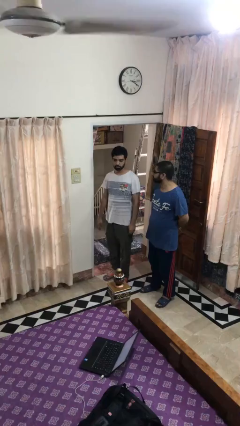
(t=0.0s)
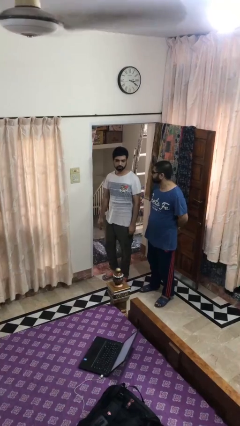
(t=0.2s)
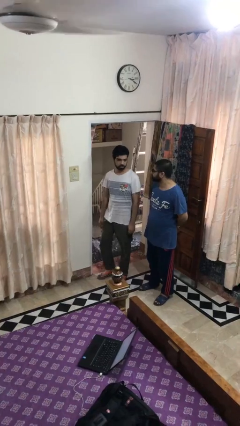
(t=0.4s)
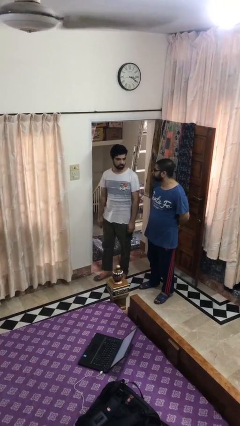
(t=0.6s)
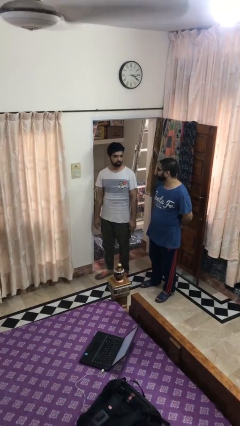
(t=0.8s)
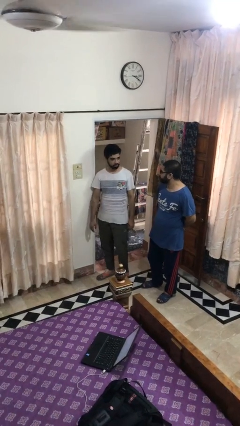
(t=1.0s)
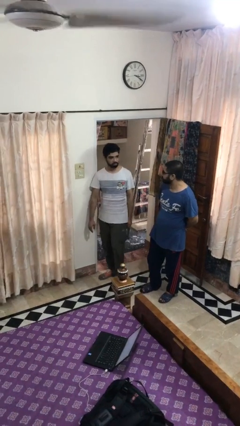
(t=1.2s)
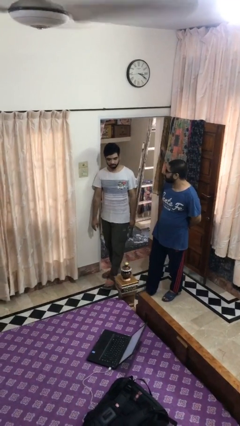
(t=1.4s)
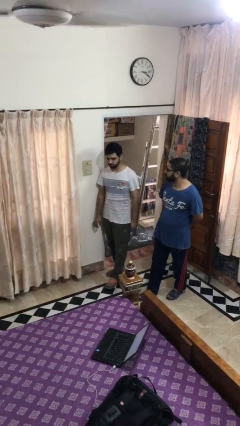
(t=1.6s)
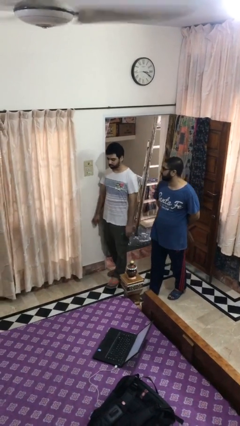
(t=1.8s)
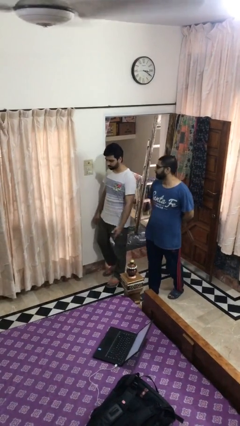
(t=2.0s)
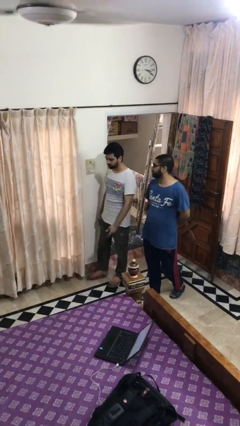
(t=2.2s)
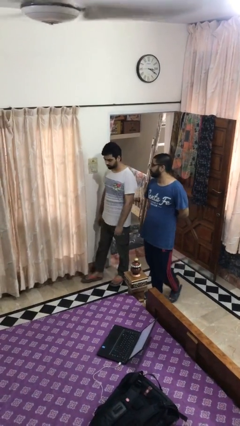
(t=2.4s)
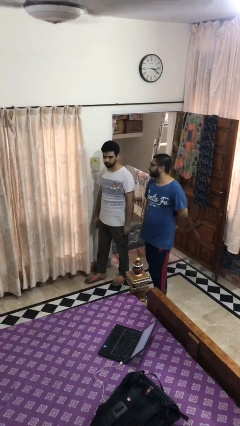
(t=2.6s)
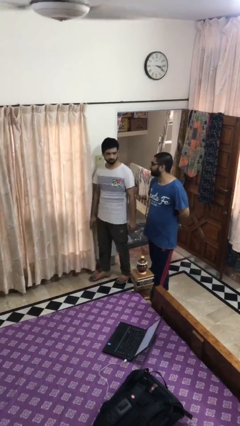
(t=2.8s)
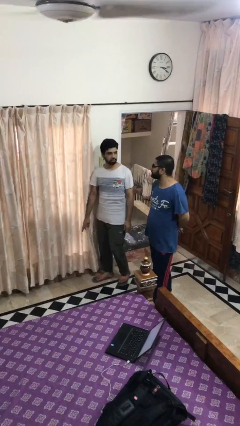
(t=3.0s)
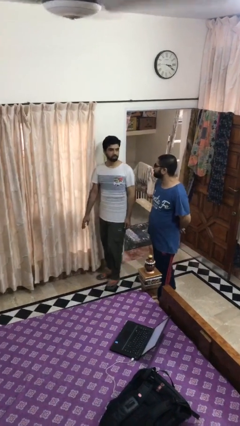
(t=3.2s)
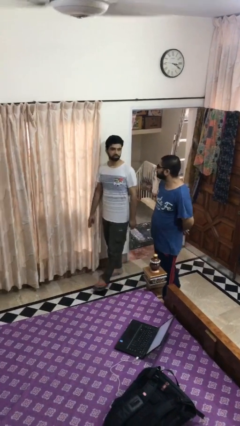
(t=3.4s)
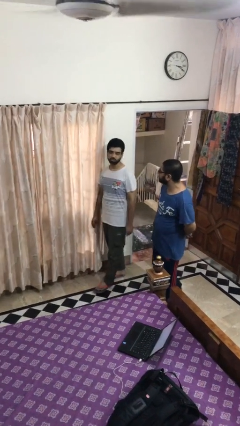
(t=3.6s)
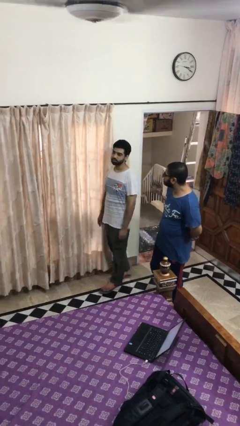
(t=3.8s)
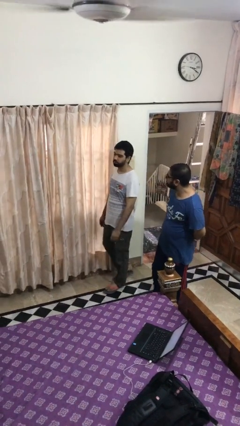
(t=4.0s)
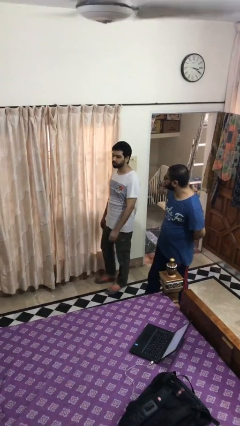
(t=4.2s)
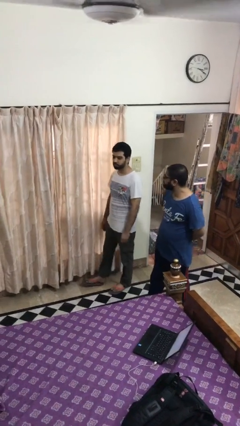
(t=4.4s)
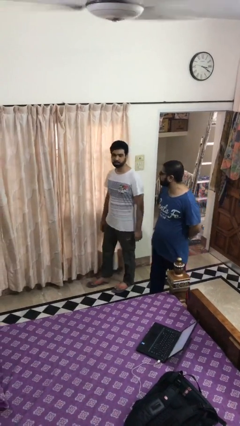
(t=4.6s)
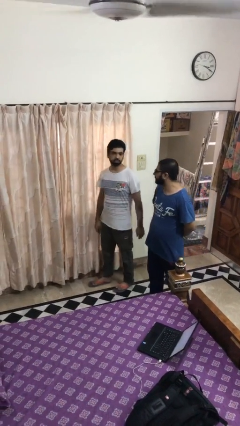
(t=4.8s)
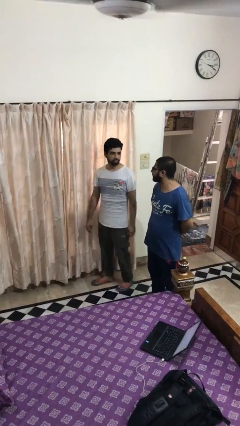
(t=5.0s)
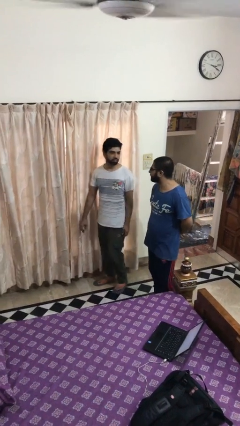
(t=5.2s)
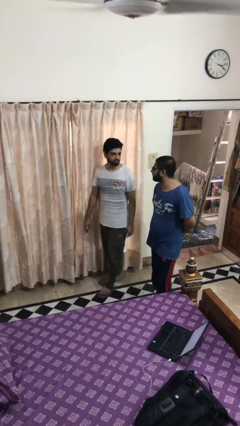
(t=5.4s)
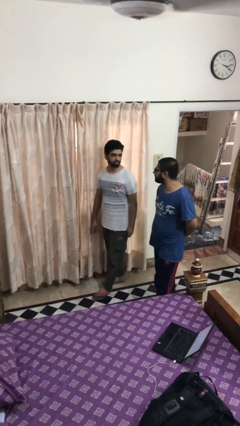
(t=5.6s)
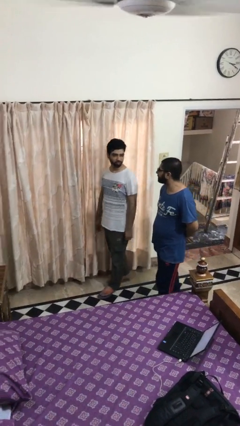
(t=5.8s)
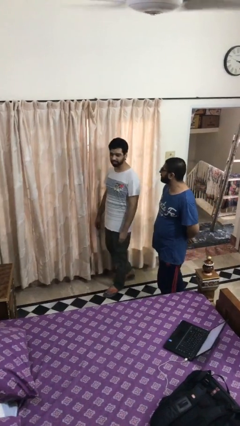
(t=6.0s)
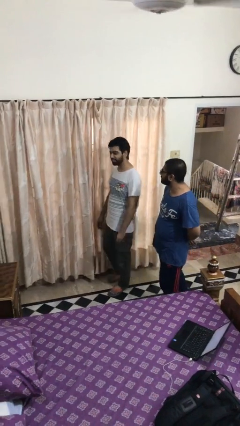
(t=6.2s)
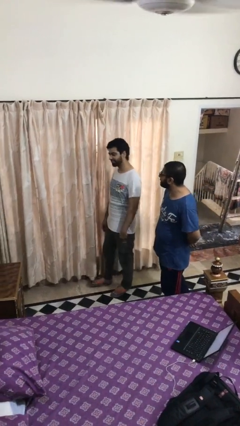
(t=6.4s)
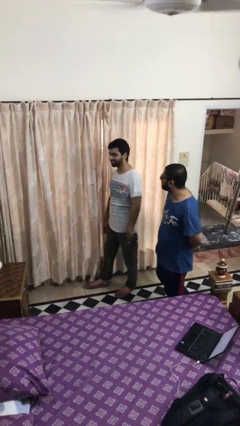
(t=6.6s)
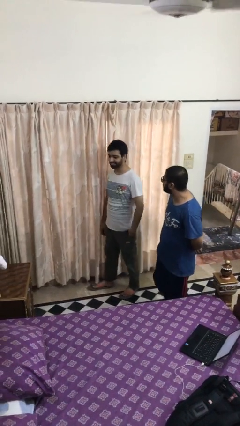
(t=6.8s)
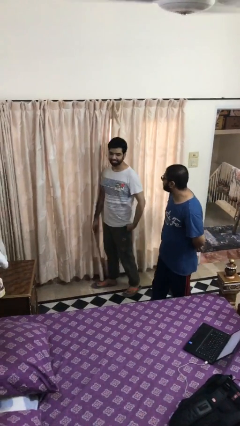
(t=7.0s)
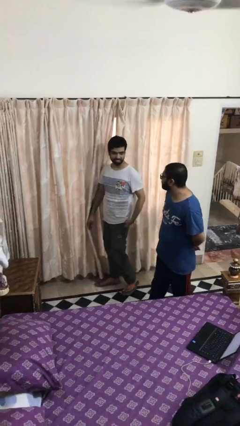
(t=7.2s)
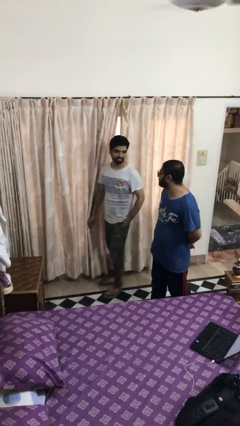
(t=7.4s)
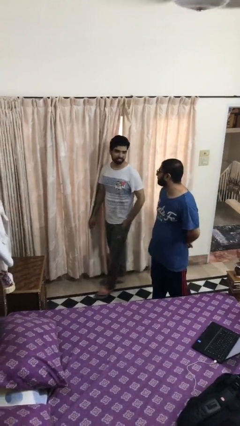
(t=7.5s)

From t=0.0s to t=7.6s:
person talks to person

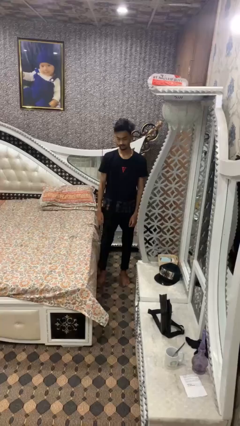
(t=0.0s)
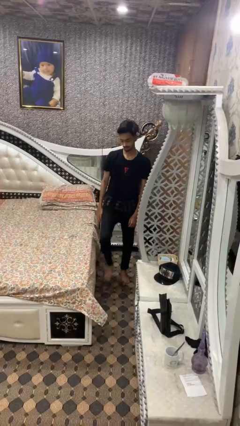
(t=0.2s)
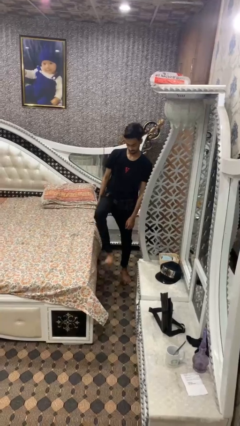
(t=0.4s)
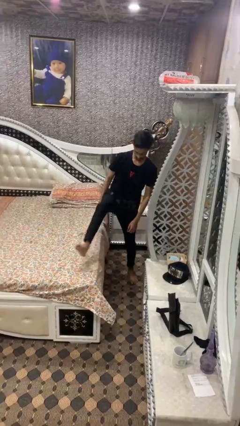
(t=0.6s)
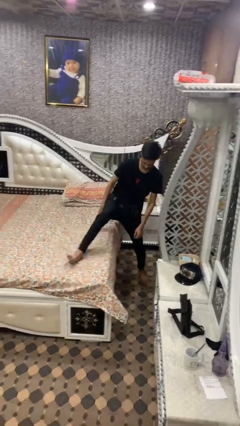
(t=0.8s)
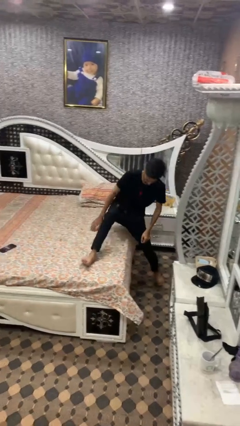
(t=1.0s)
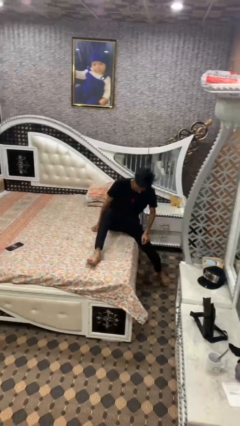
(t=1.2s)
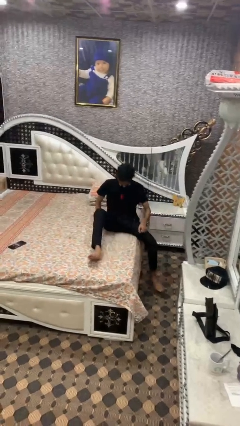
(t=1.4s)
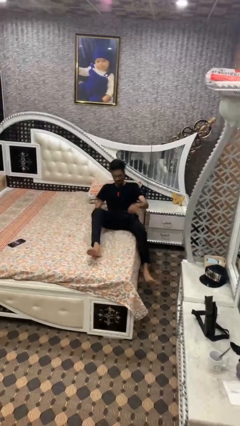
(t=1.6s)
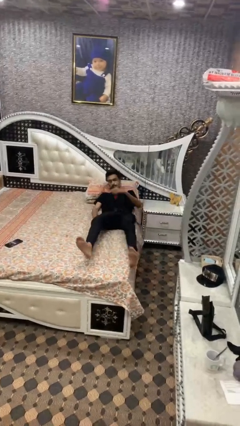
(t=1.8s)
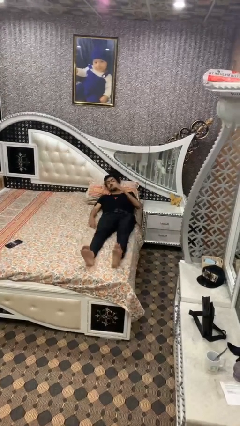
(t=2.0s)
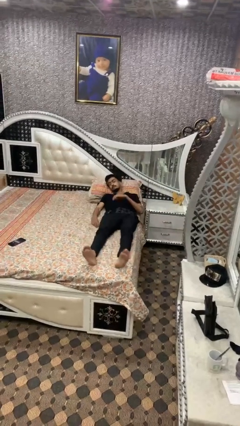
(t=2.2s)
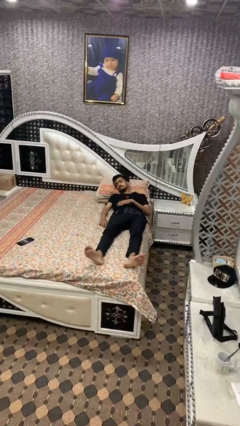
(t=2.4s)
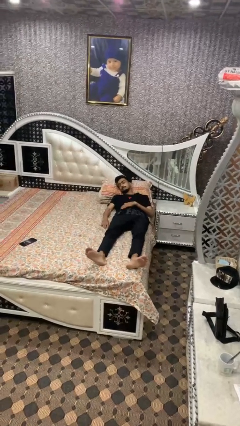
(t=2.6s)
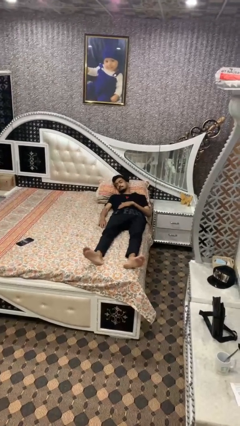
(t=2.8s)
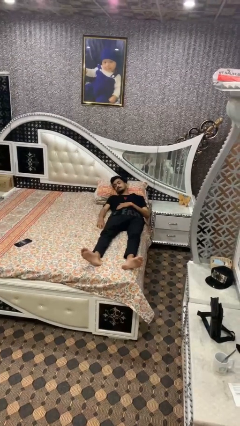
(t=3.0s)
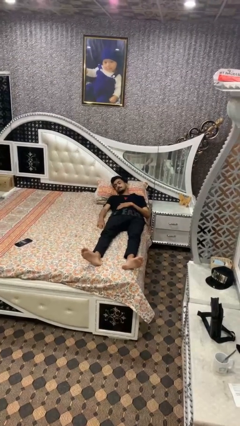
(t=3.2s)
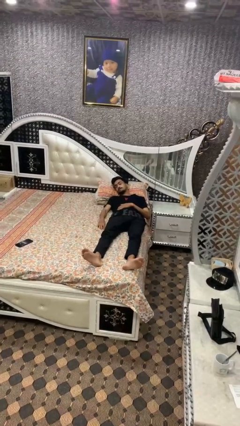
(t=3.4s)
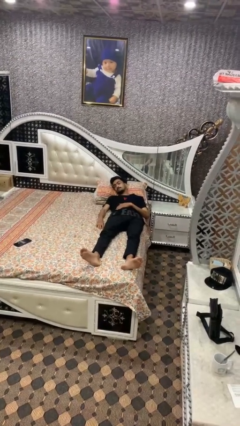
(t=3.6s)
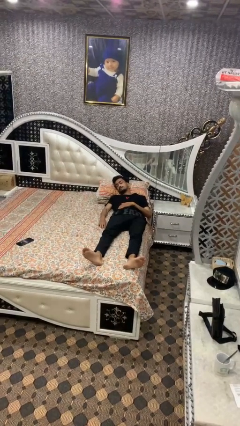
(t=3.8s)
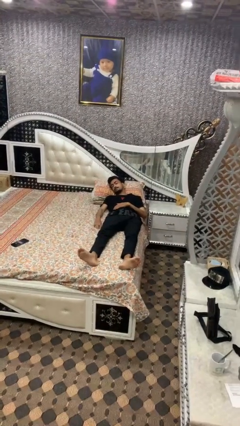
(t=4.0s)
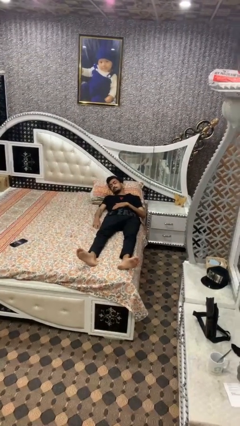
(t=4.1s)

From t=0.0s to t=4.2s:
person lies down on bed

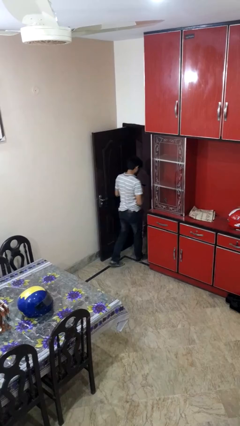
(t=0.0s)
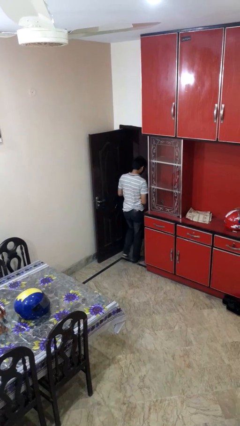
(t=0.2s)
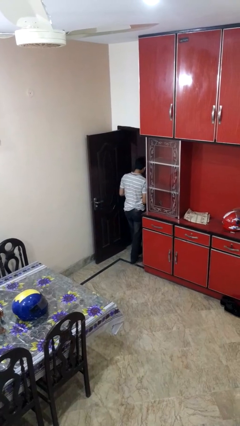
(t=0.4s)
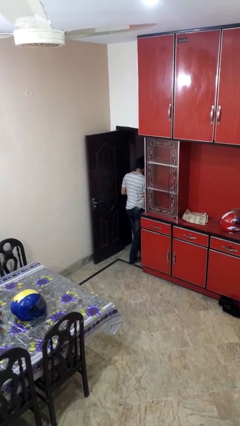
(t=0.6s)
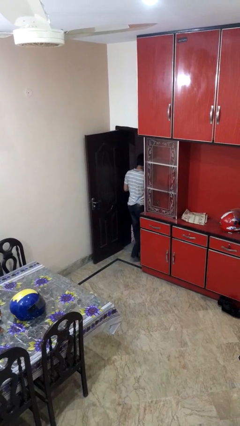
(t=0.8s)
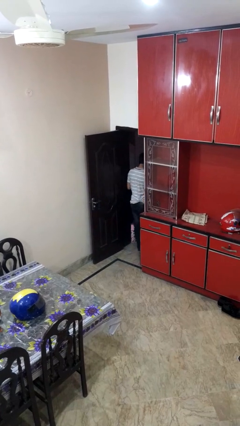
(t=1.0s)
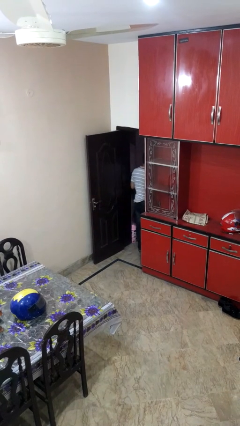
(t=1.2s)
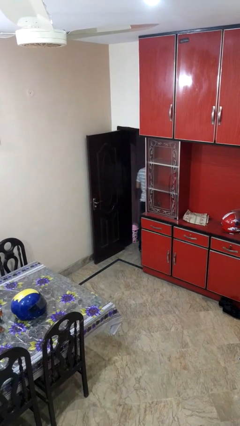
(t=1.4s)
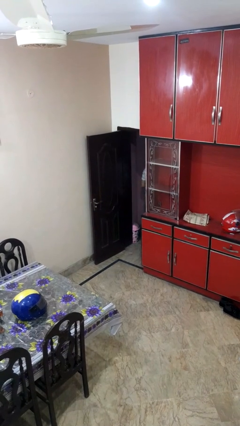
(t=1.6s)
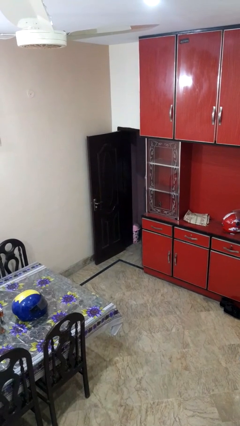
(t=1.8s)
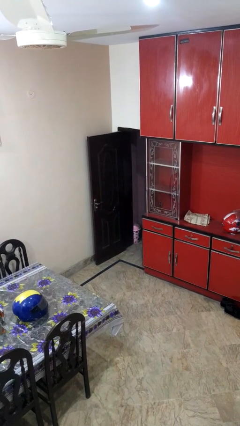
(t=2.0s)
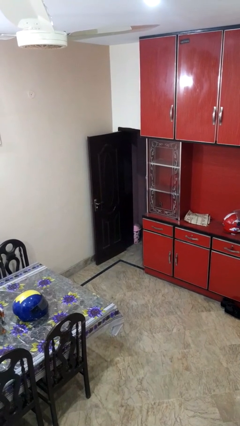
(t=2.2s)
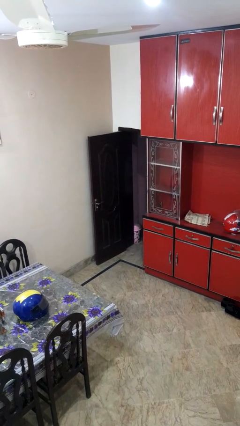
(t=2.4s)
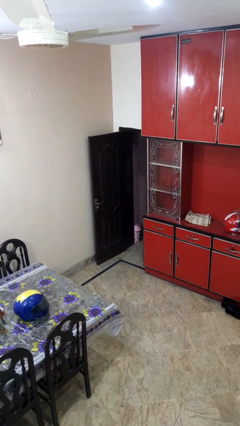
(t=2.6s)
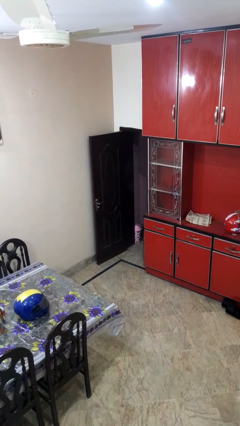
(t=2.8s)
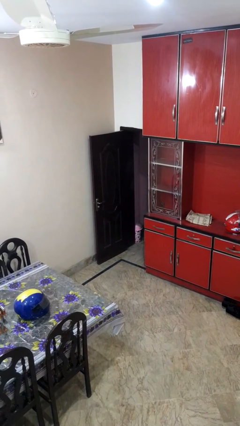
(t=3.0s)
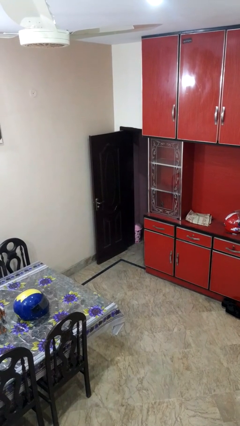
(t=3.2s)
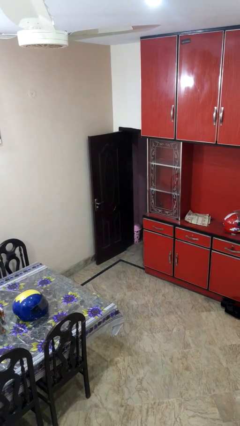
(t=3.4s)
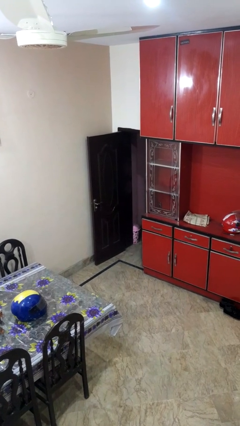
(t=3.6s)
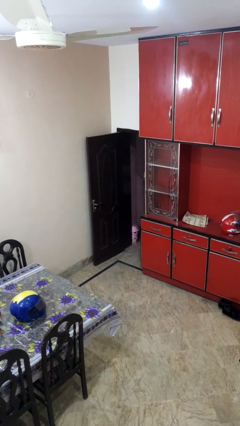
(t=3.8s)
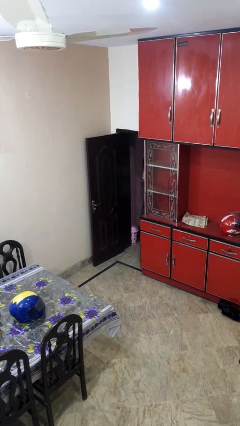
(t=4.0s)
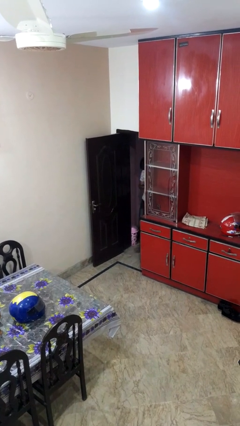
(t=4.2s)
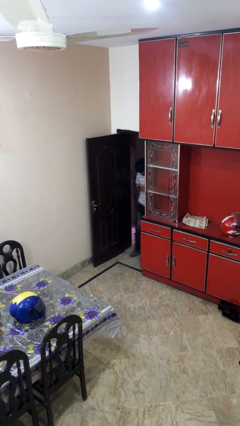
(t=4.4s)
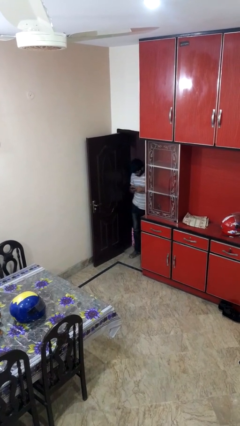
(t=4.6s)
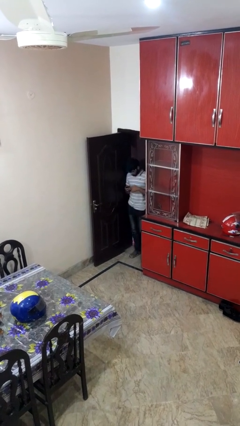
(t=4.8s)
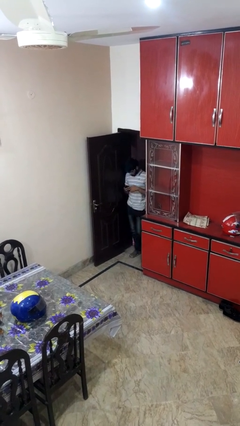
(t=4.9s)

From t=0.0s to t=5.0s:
person exits scene through structure

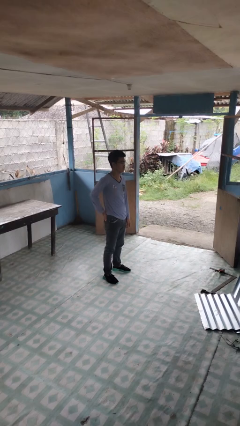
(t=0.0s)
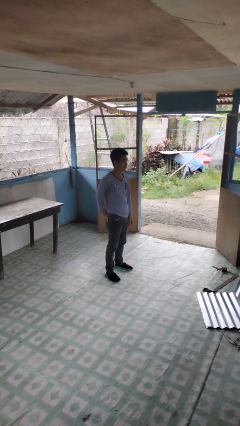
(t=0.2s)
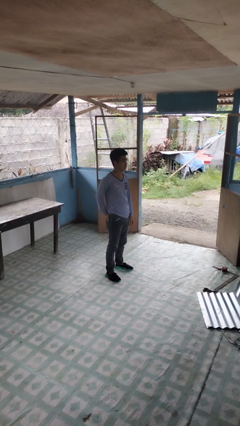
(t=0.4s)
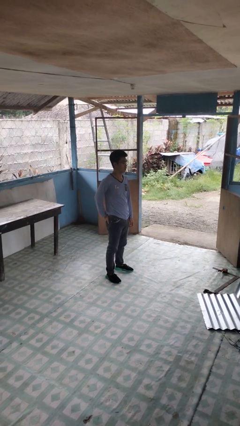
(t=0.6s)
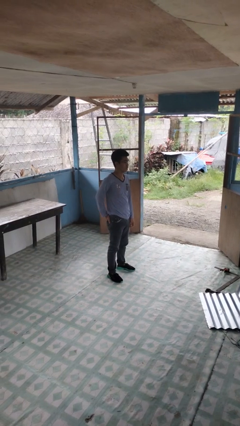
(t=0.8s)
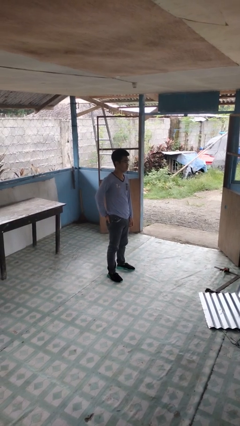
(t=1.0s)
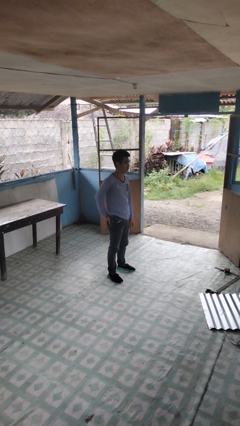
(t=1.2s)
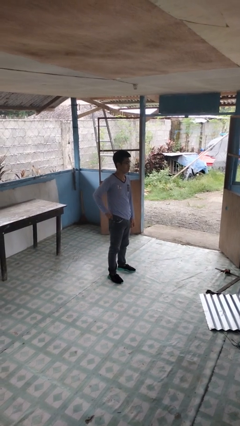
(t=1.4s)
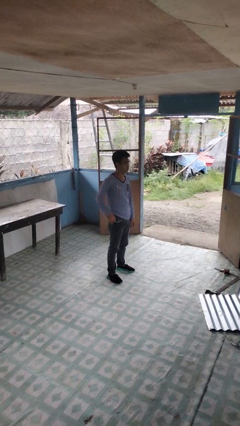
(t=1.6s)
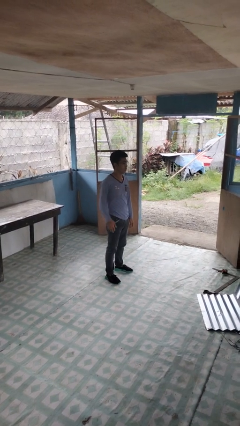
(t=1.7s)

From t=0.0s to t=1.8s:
person puts hands in back pockets
